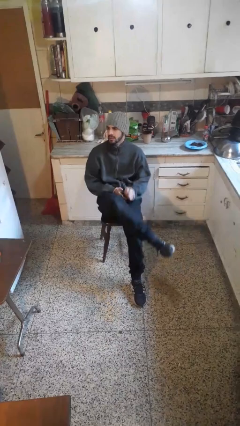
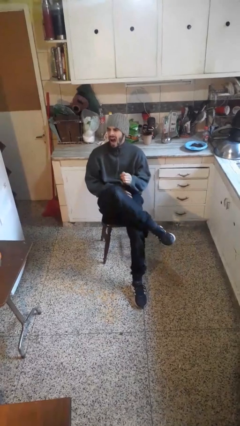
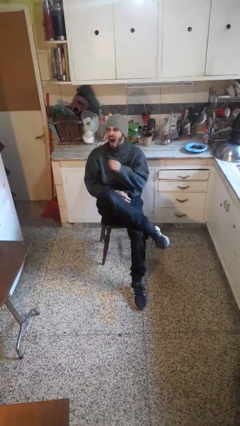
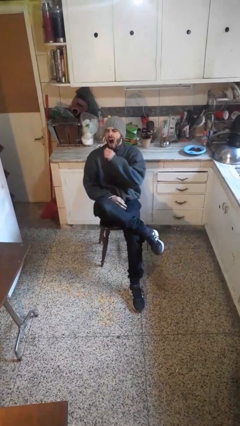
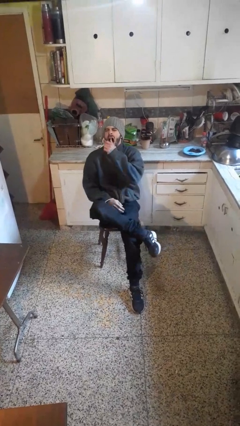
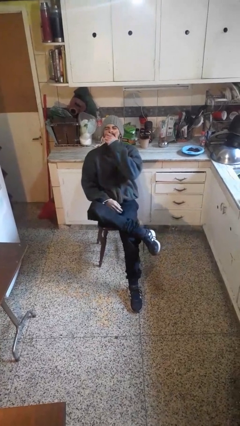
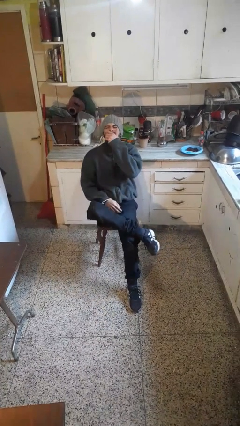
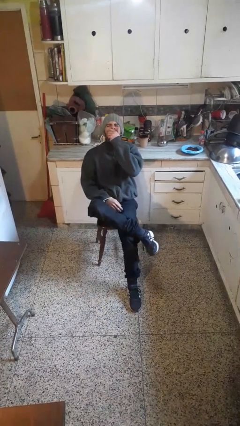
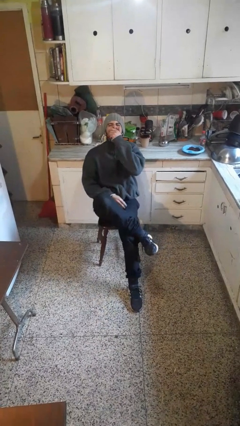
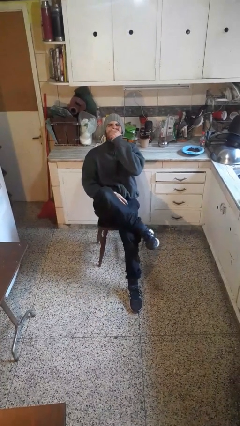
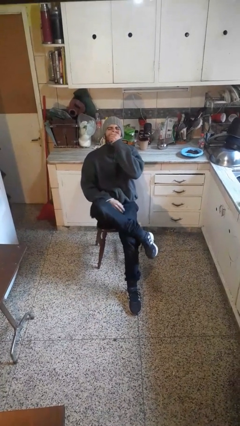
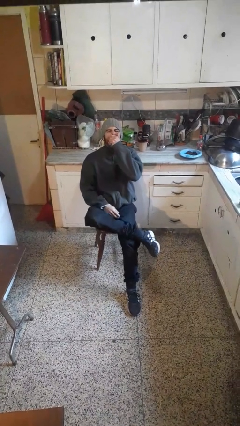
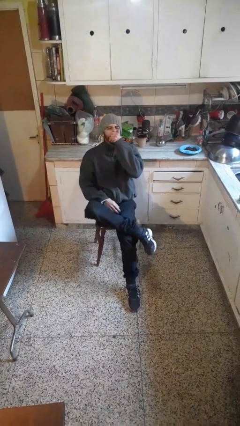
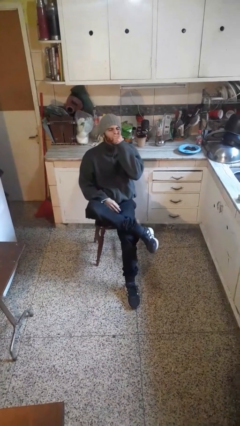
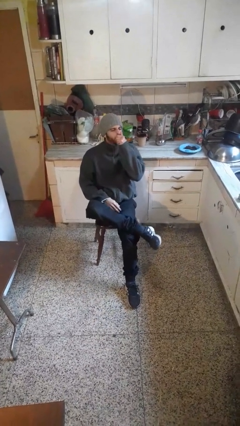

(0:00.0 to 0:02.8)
person yawns

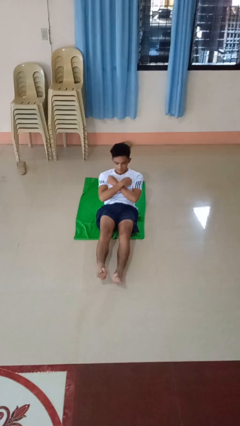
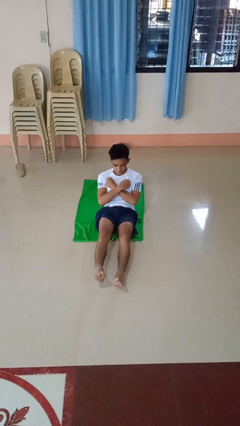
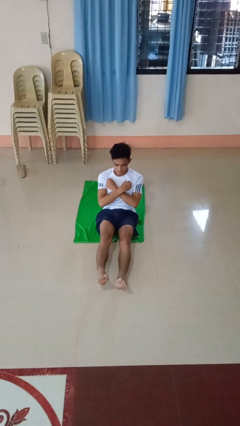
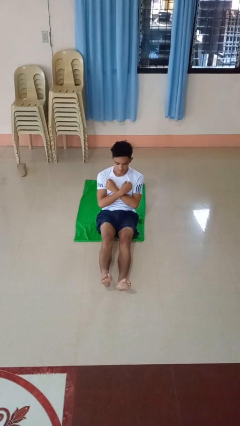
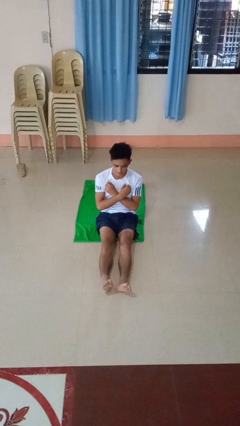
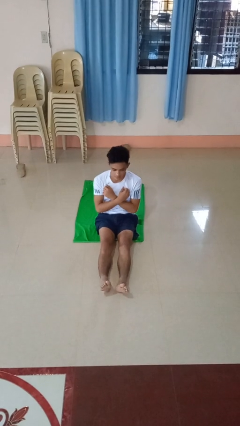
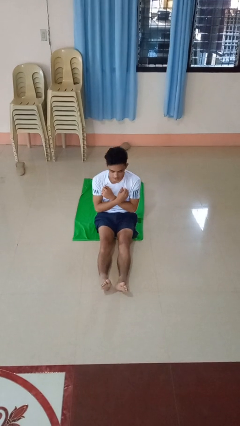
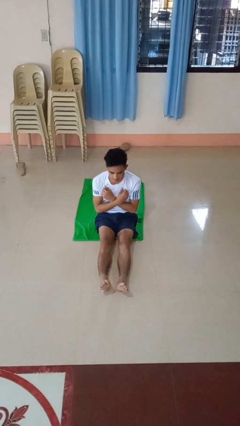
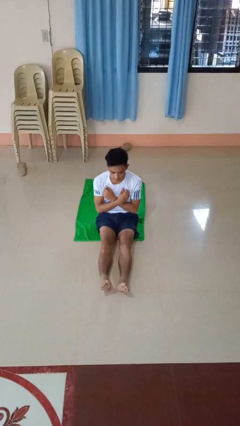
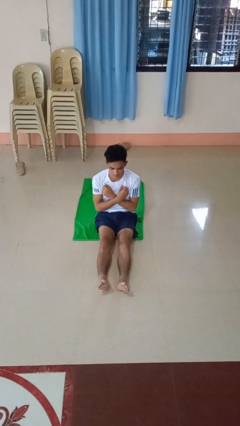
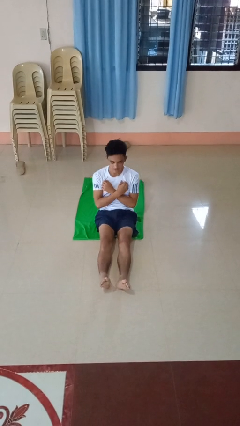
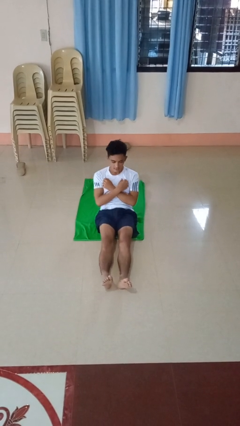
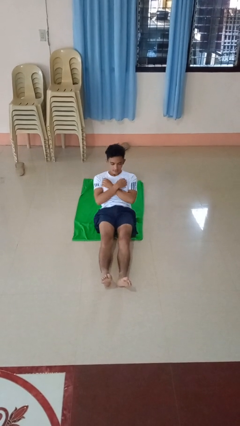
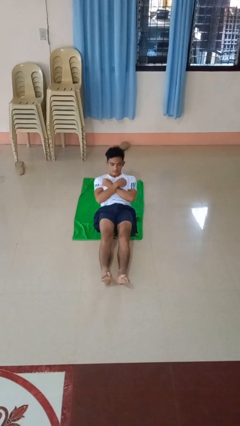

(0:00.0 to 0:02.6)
person exercises with situp

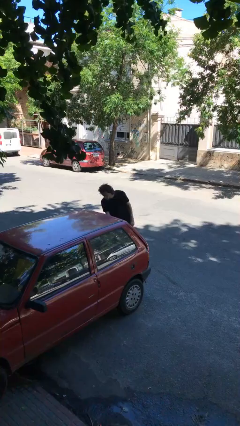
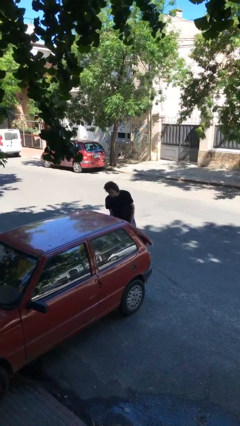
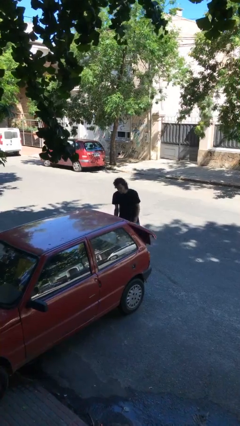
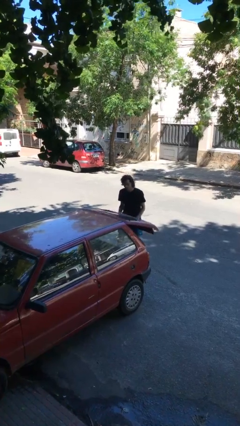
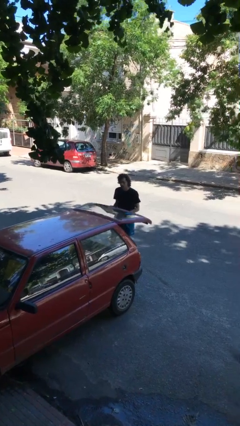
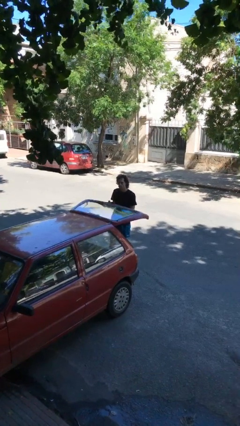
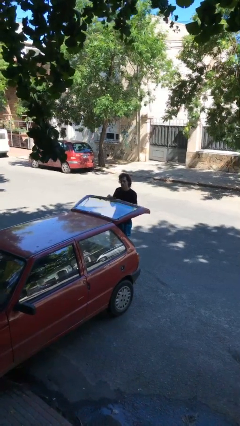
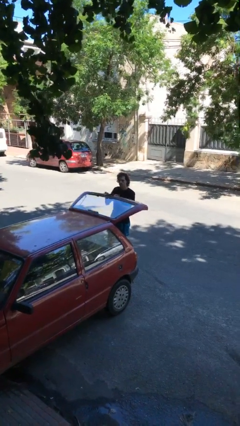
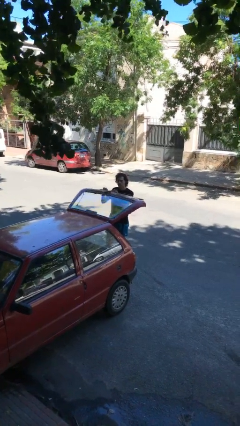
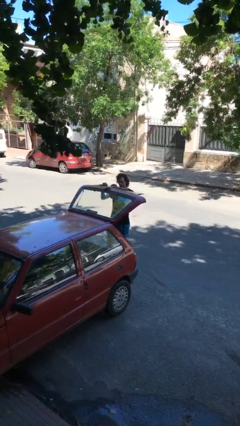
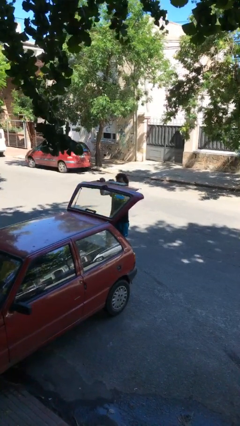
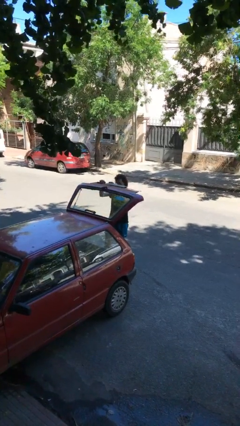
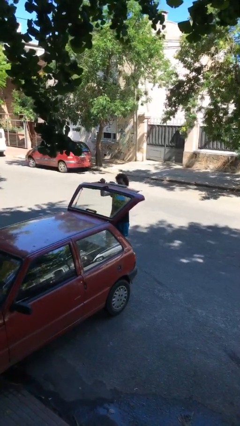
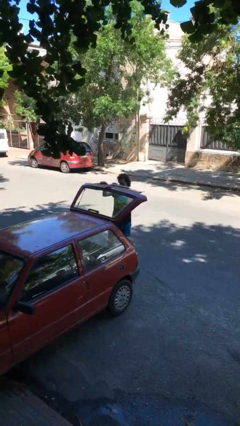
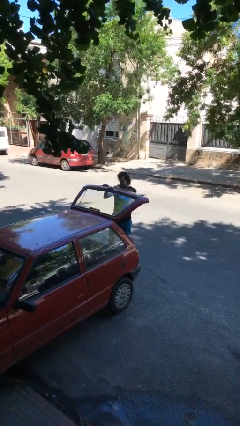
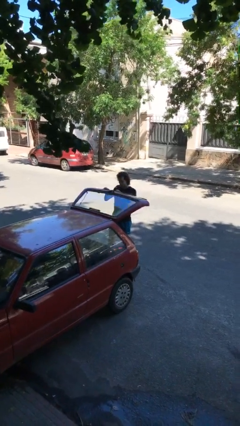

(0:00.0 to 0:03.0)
person opens car trunk

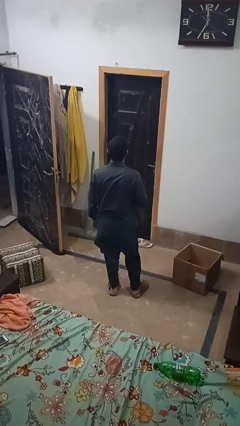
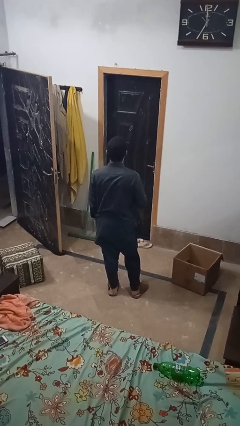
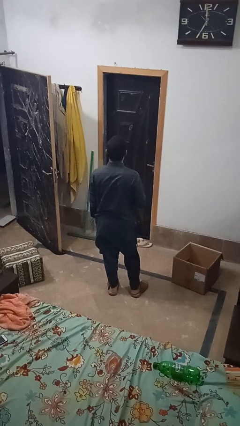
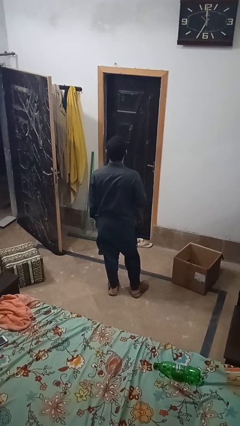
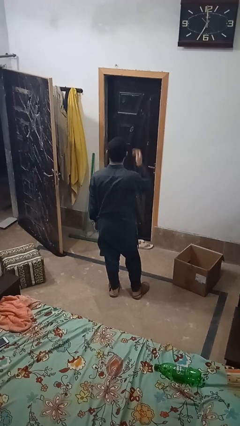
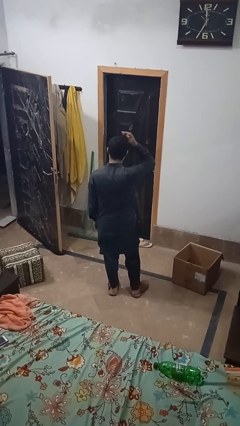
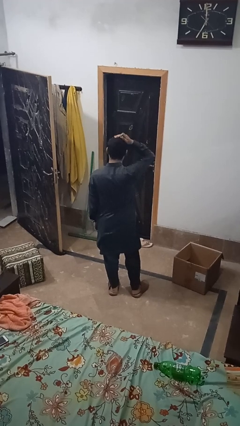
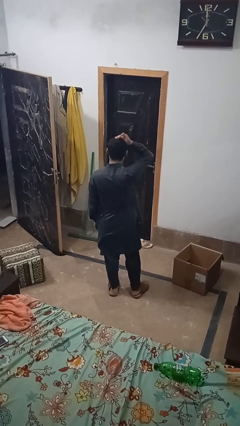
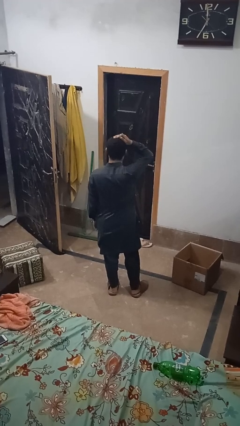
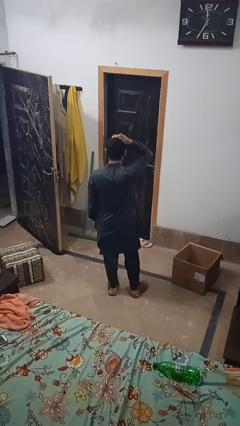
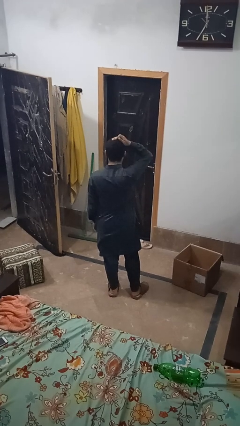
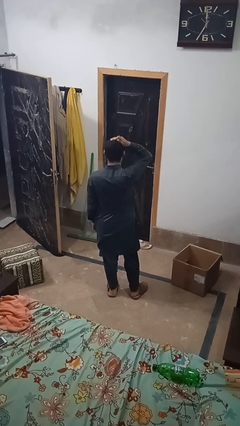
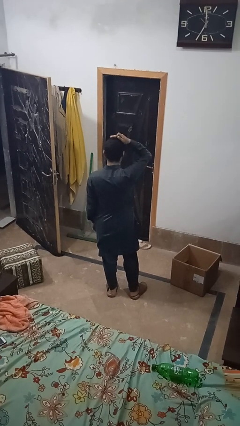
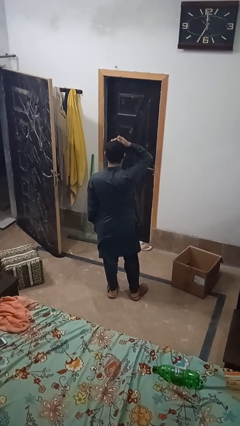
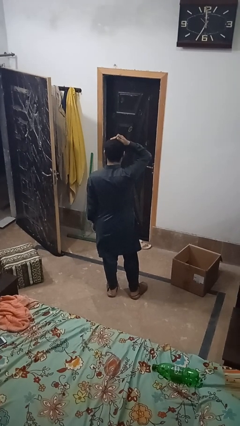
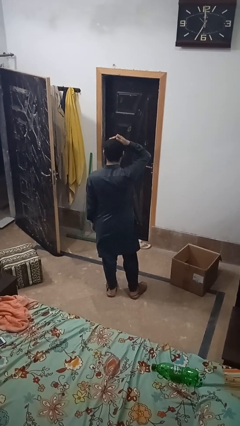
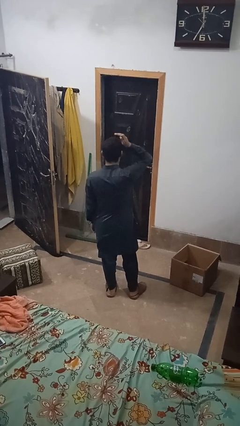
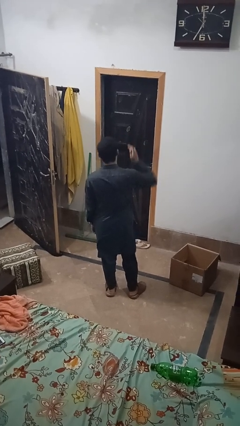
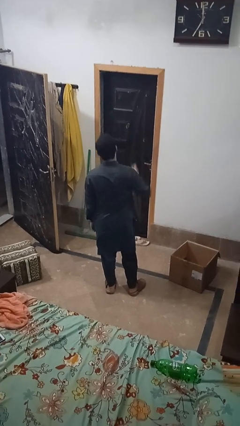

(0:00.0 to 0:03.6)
person pats head

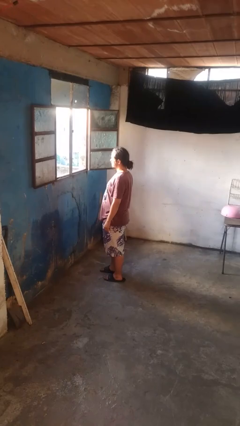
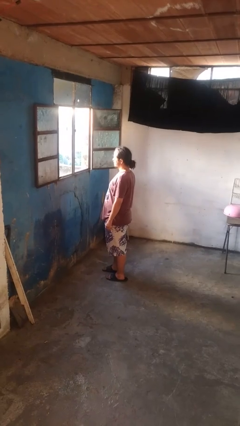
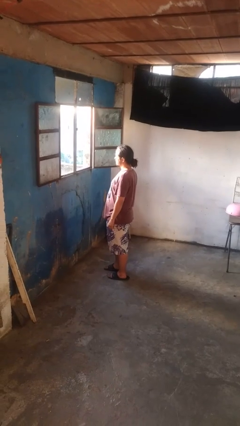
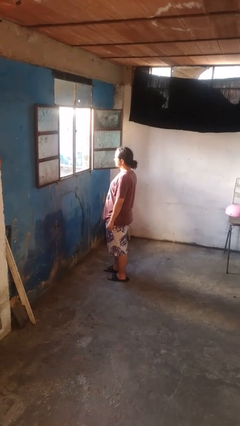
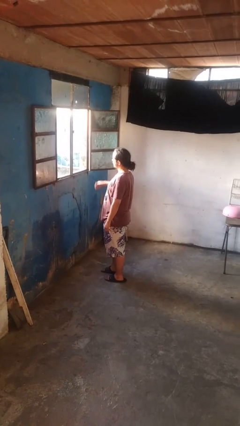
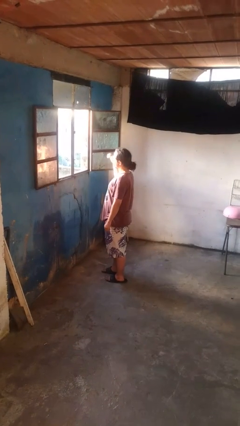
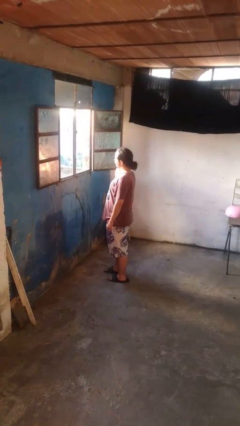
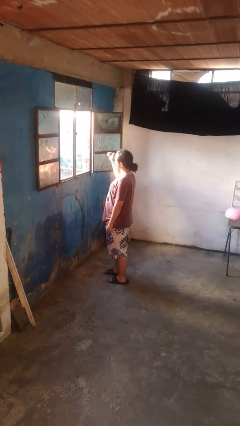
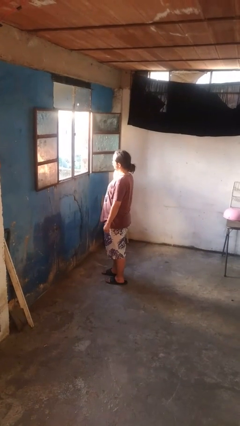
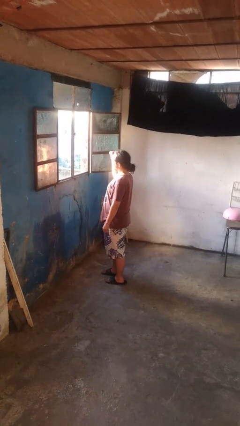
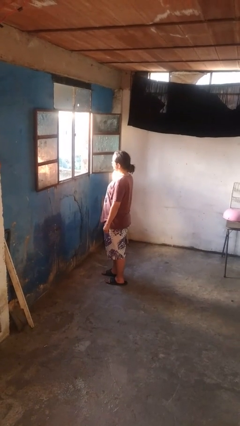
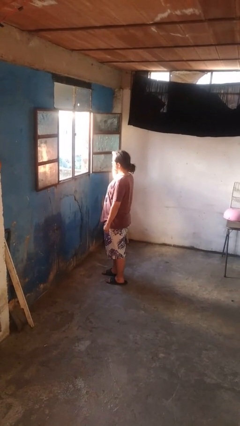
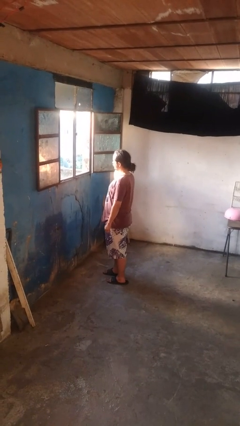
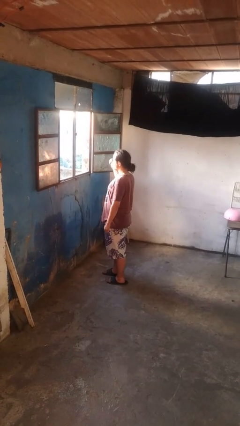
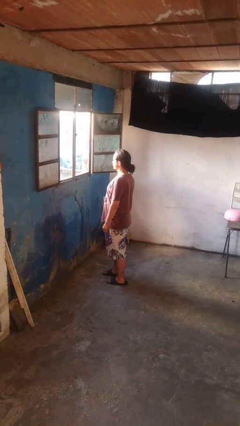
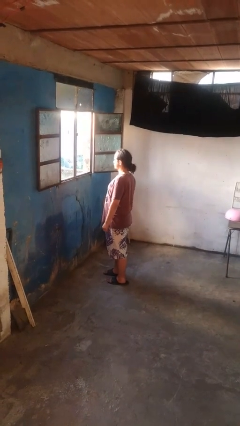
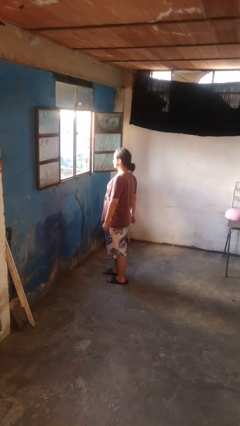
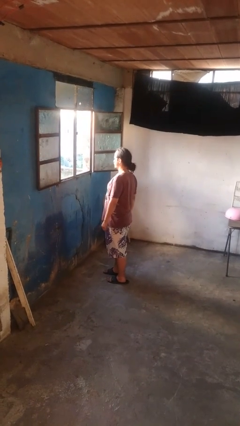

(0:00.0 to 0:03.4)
person gestures behind me

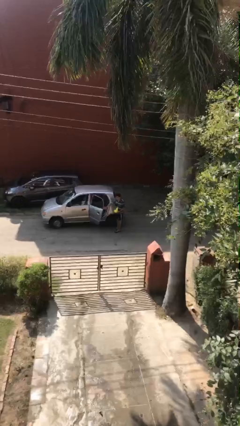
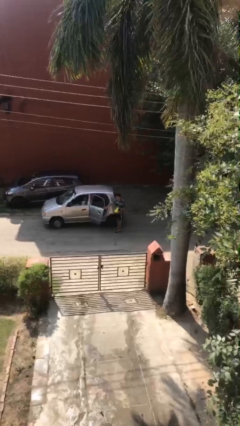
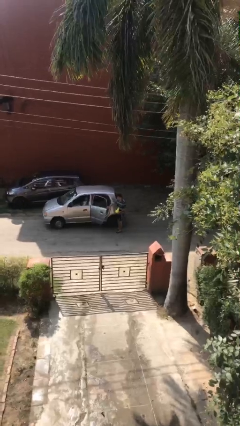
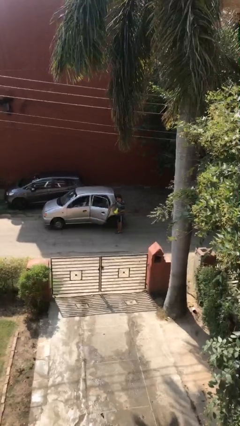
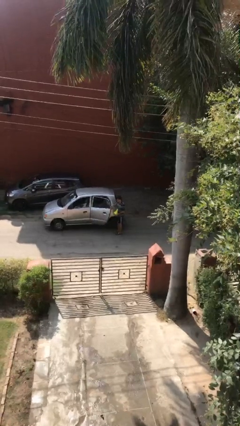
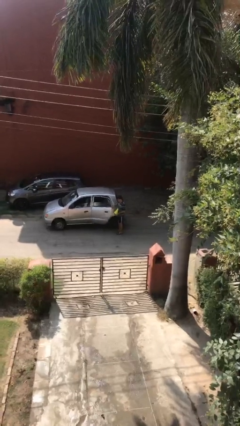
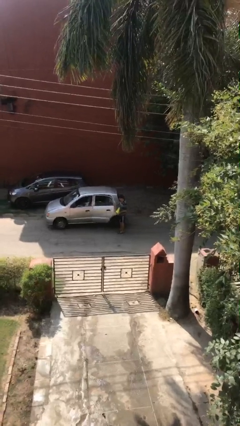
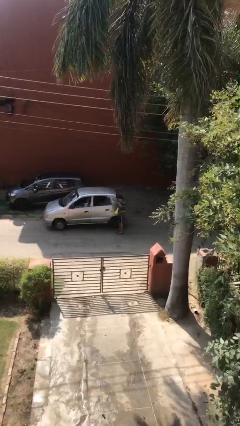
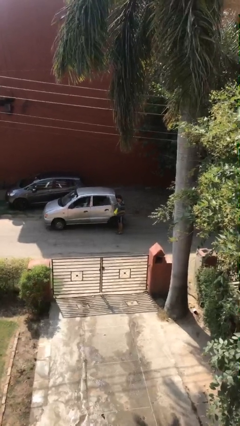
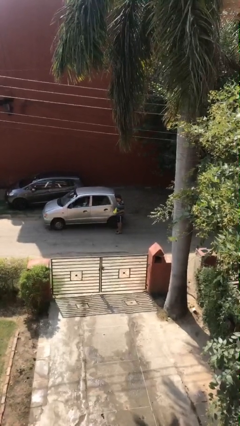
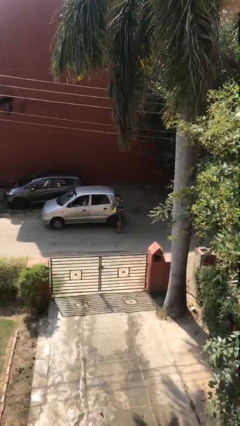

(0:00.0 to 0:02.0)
person closes car door
